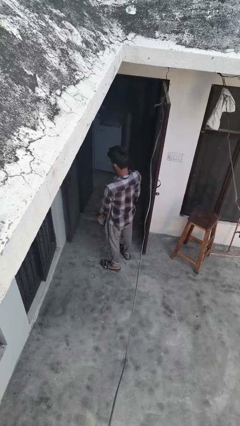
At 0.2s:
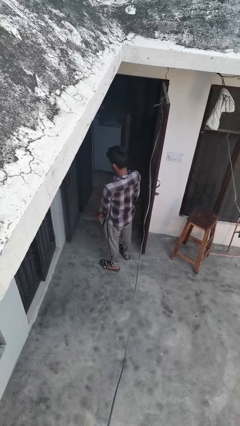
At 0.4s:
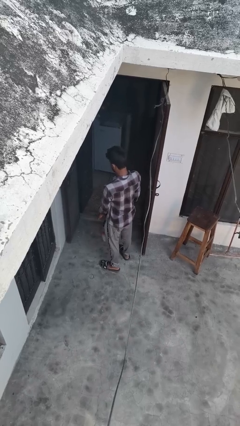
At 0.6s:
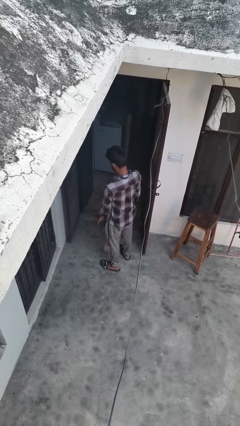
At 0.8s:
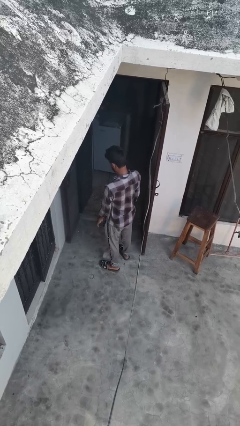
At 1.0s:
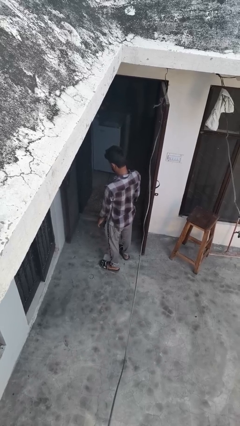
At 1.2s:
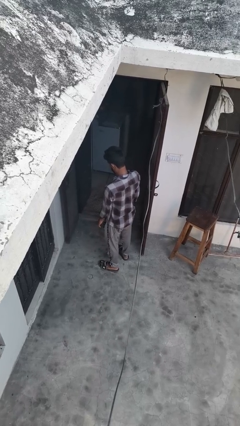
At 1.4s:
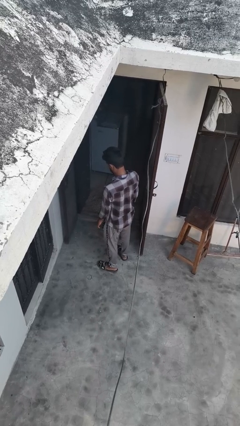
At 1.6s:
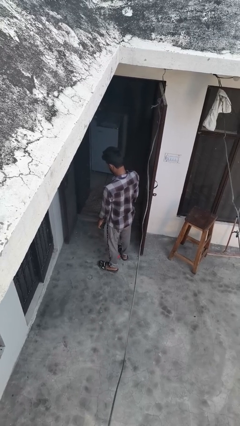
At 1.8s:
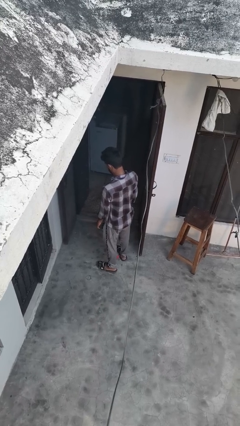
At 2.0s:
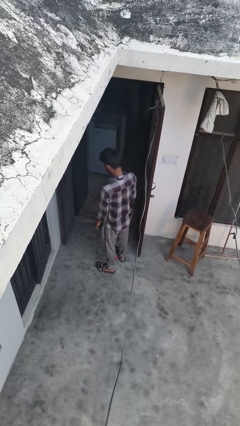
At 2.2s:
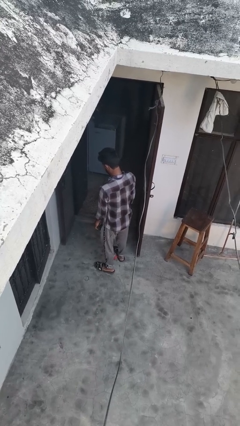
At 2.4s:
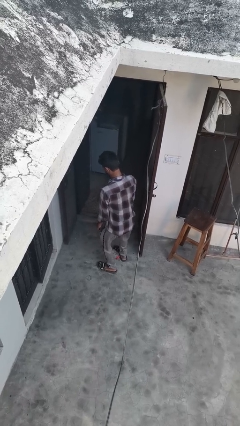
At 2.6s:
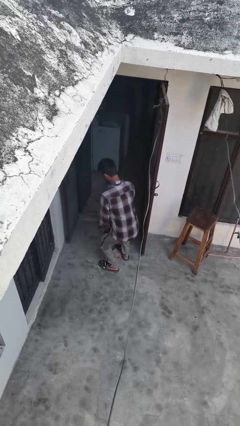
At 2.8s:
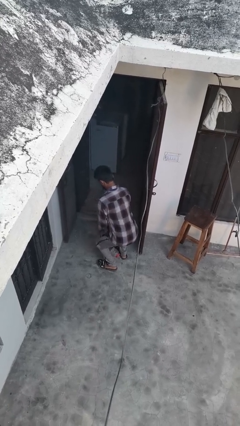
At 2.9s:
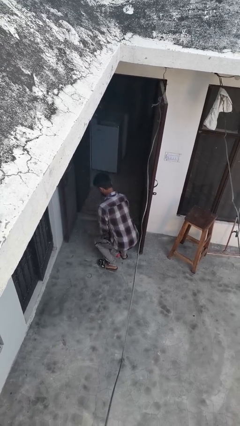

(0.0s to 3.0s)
person drops object

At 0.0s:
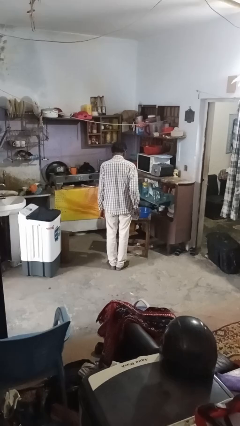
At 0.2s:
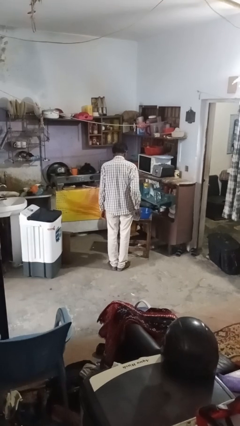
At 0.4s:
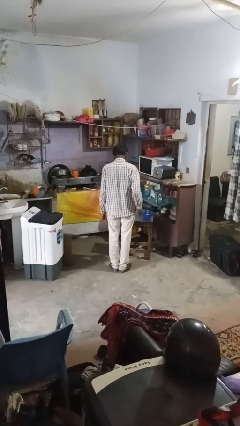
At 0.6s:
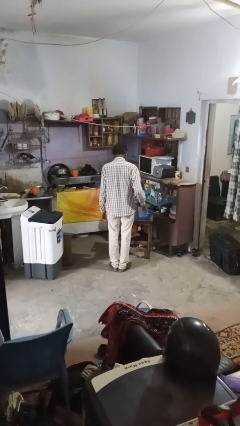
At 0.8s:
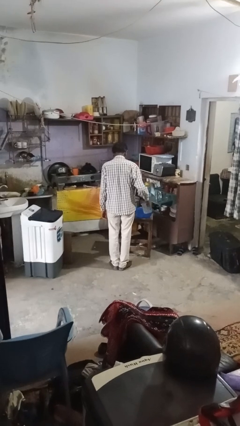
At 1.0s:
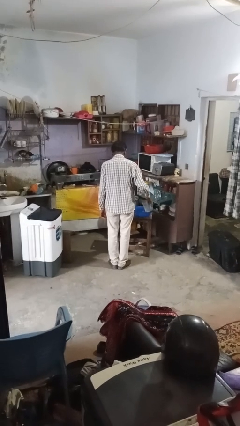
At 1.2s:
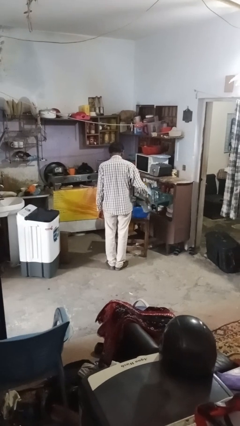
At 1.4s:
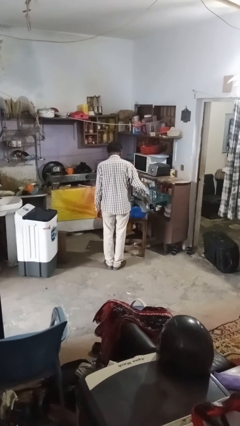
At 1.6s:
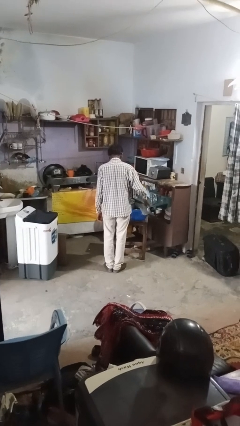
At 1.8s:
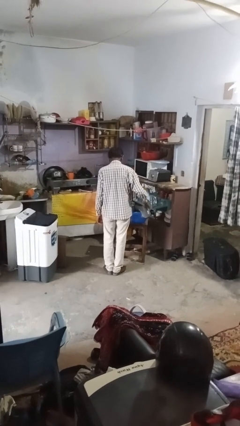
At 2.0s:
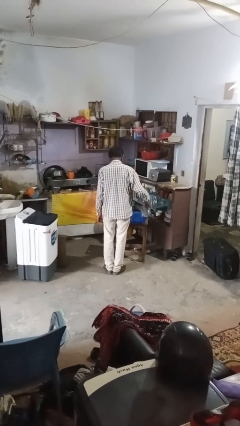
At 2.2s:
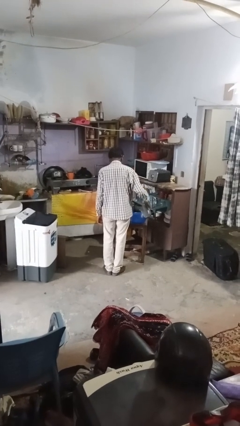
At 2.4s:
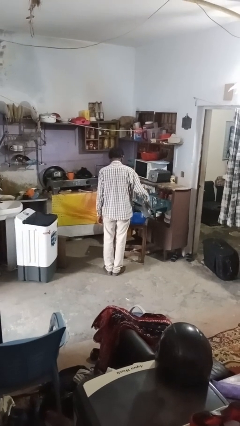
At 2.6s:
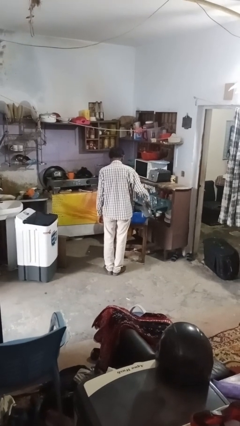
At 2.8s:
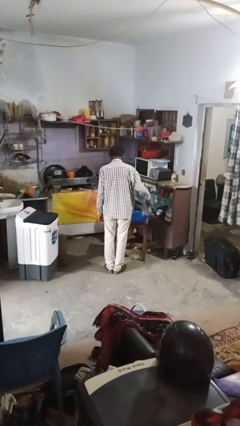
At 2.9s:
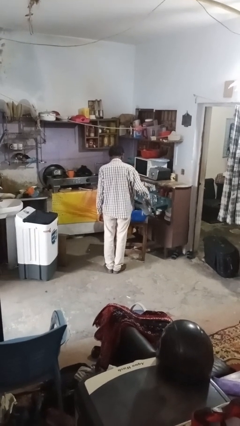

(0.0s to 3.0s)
person pours into bowl

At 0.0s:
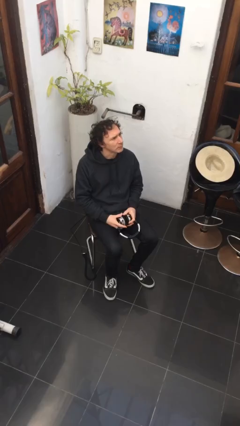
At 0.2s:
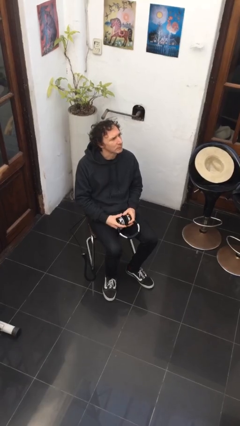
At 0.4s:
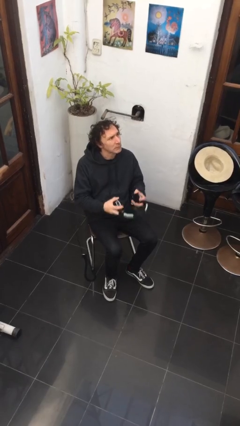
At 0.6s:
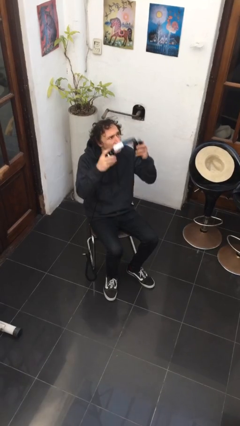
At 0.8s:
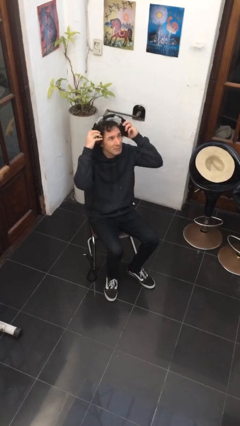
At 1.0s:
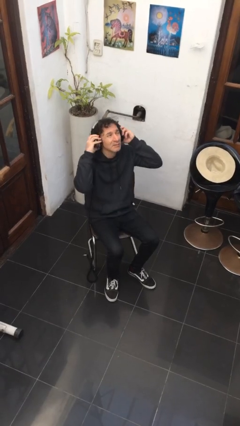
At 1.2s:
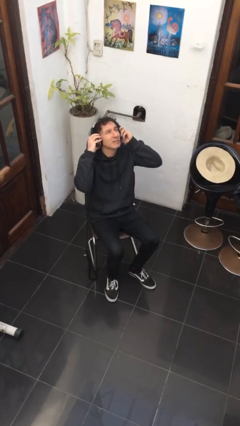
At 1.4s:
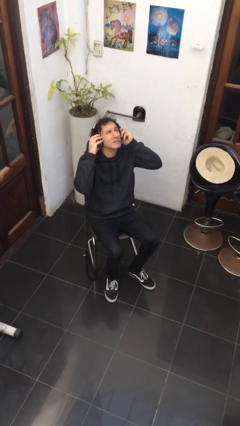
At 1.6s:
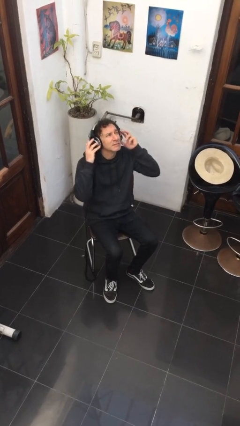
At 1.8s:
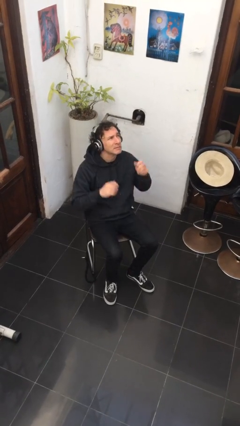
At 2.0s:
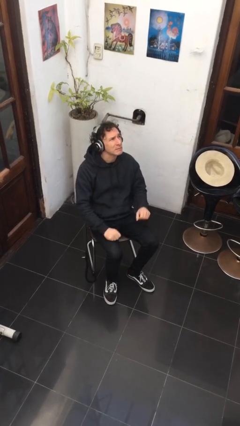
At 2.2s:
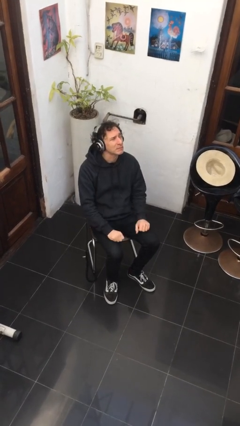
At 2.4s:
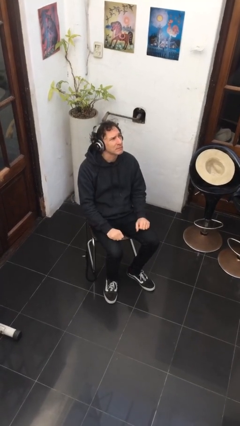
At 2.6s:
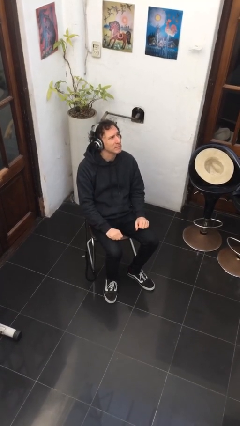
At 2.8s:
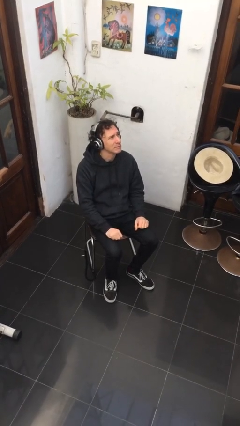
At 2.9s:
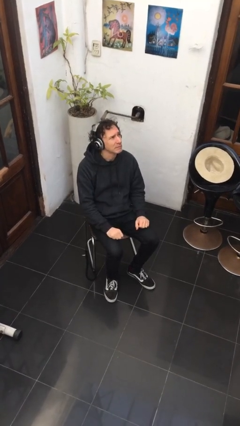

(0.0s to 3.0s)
person puts on headphones

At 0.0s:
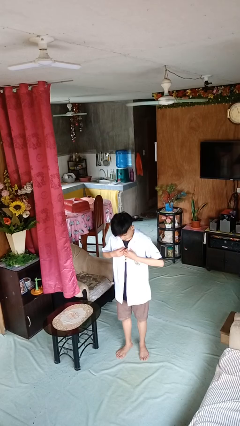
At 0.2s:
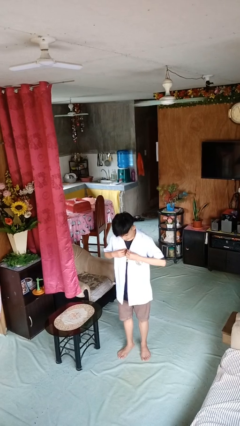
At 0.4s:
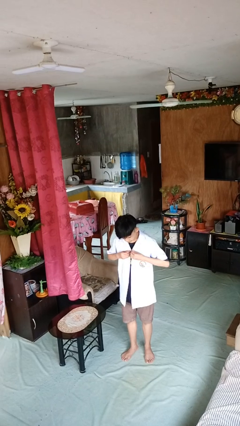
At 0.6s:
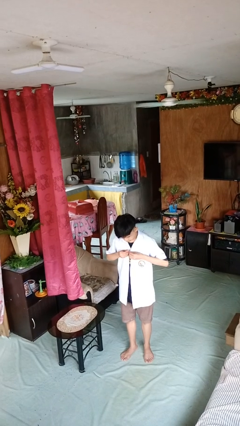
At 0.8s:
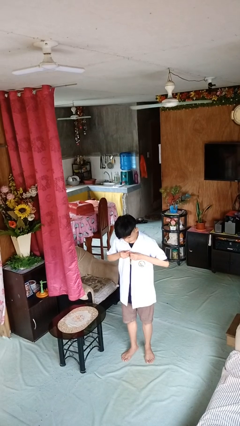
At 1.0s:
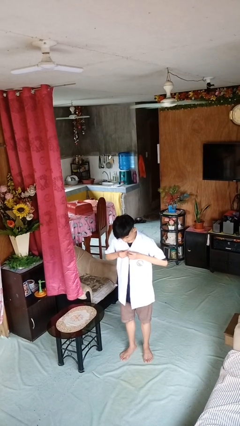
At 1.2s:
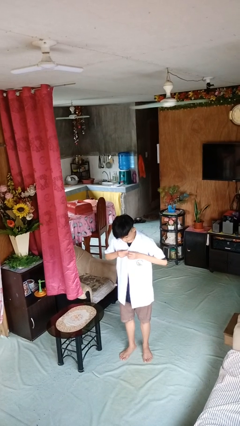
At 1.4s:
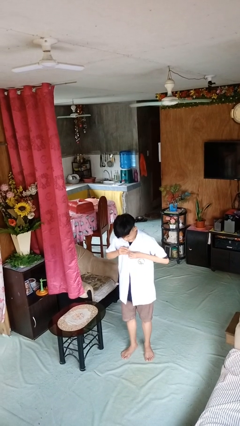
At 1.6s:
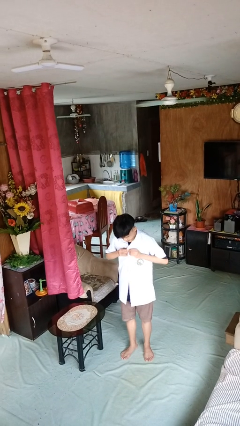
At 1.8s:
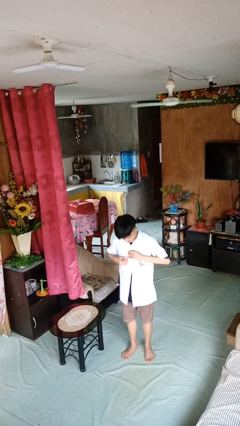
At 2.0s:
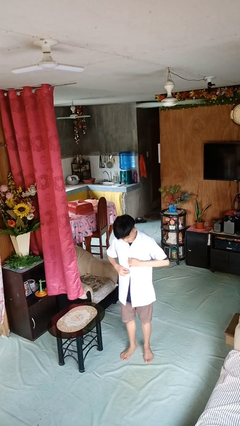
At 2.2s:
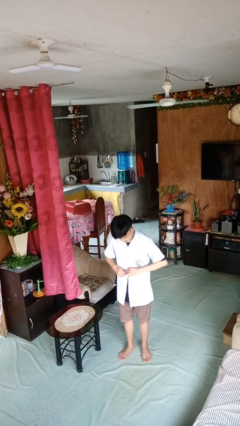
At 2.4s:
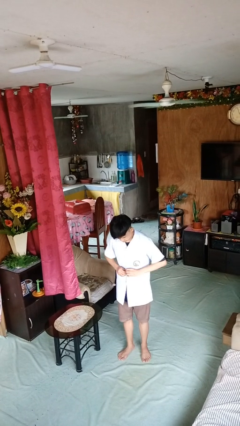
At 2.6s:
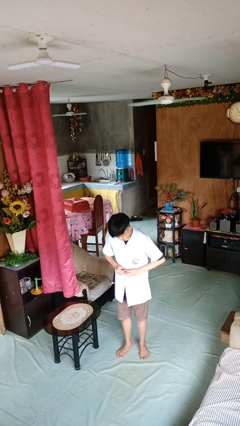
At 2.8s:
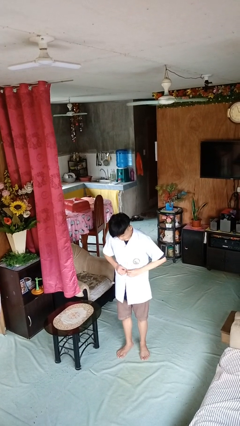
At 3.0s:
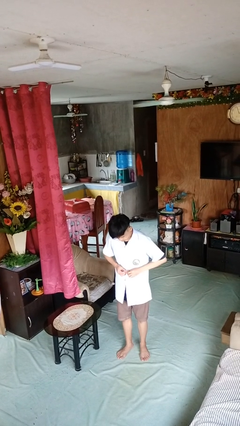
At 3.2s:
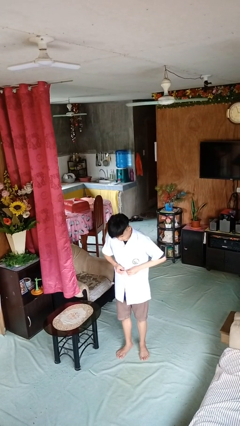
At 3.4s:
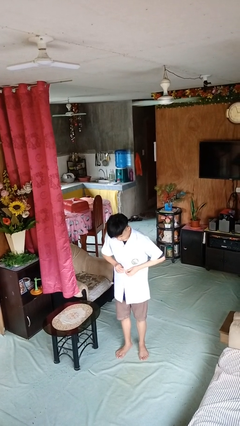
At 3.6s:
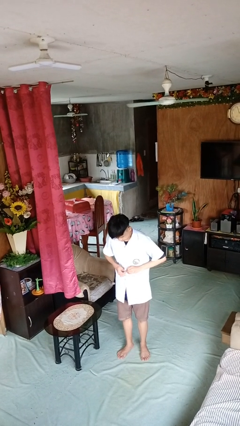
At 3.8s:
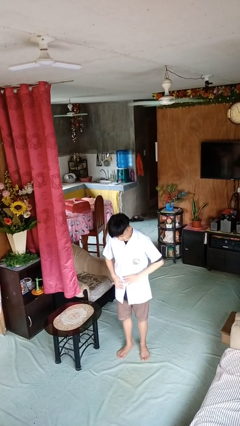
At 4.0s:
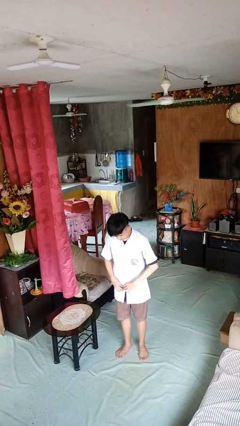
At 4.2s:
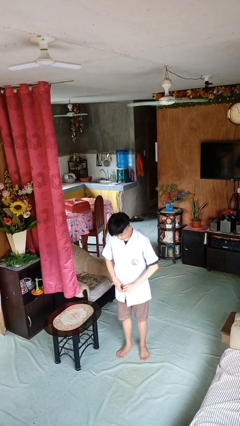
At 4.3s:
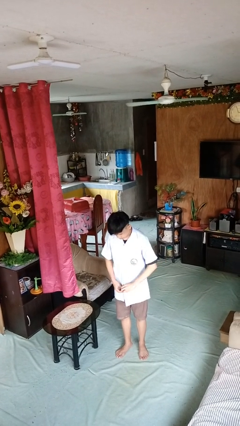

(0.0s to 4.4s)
person buttons shirt

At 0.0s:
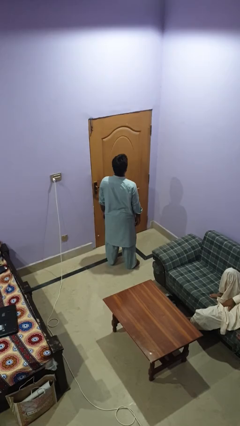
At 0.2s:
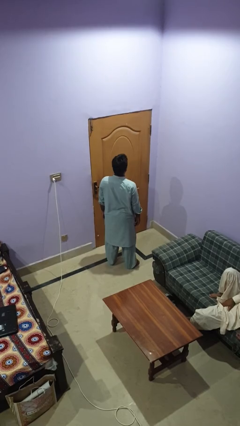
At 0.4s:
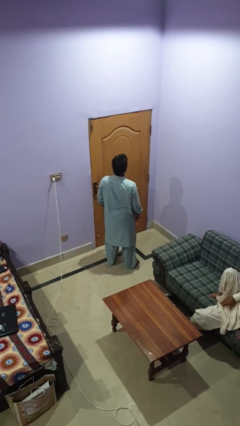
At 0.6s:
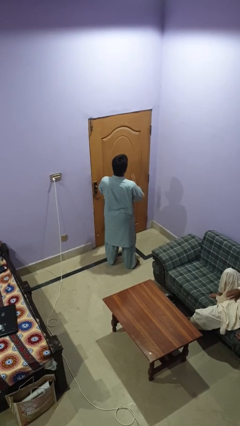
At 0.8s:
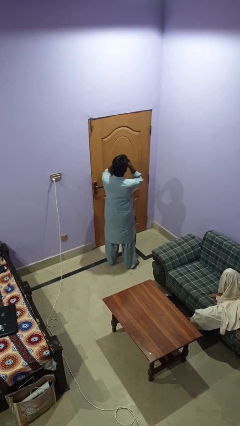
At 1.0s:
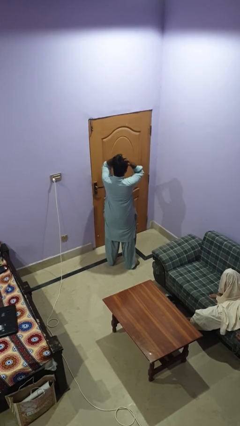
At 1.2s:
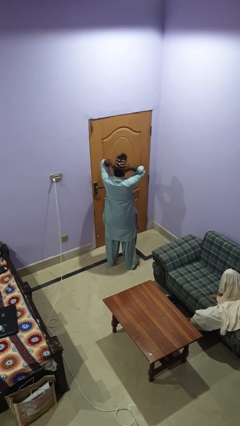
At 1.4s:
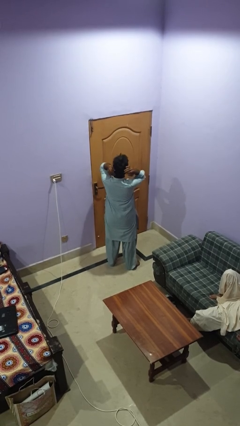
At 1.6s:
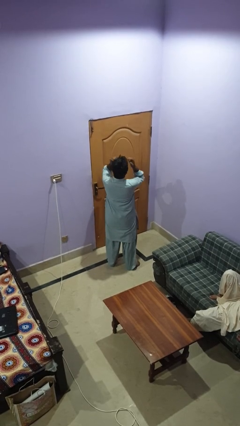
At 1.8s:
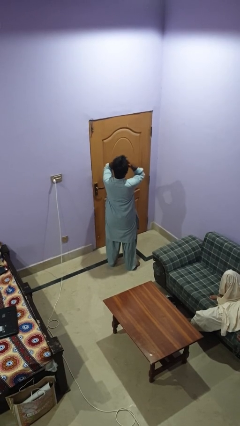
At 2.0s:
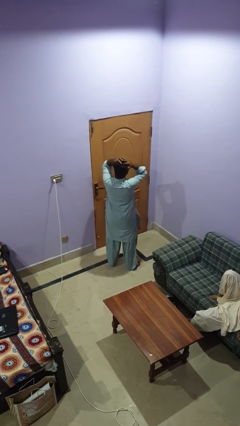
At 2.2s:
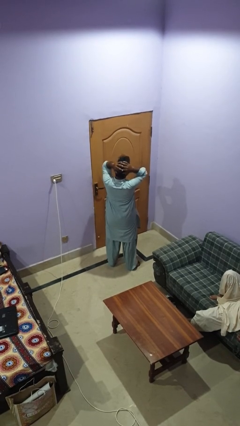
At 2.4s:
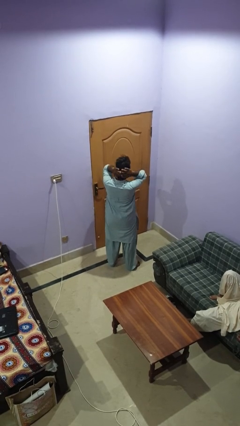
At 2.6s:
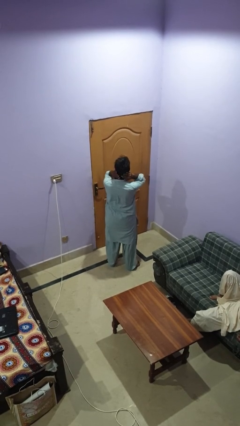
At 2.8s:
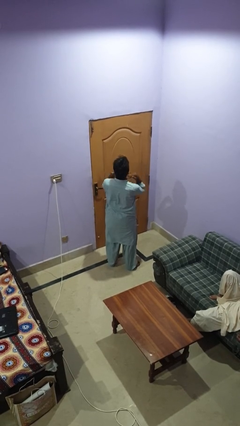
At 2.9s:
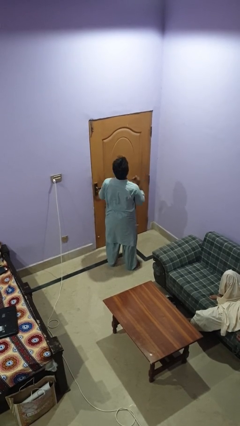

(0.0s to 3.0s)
person strokes hair

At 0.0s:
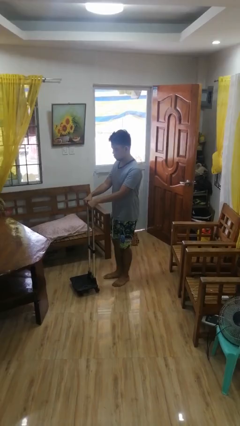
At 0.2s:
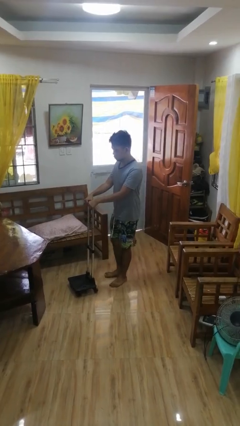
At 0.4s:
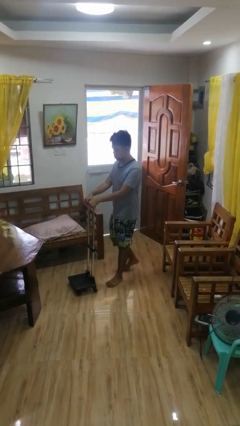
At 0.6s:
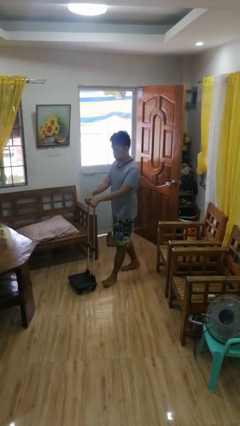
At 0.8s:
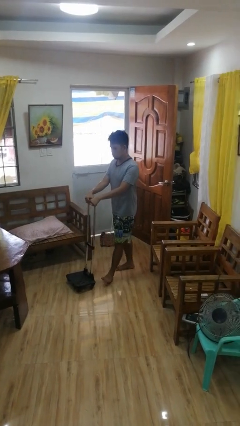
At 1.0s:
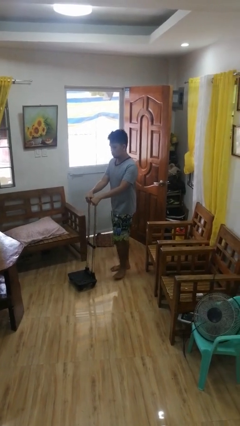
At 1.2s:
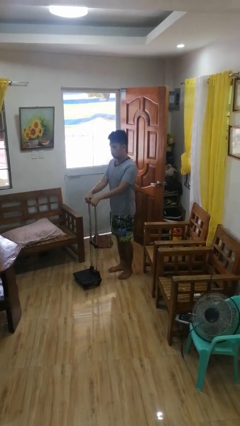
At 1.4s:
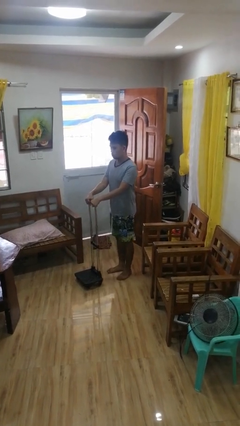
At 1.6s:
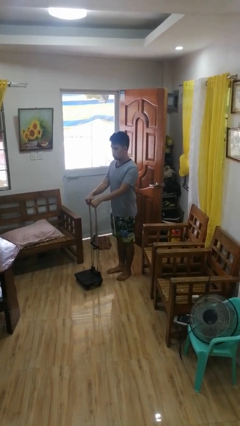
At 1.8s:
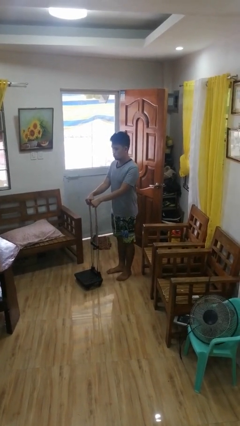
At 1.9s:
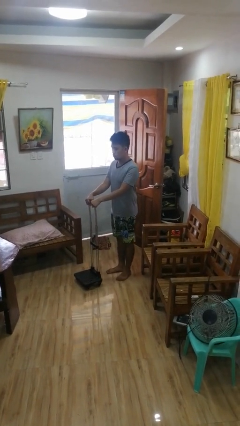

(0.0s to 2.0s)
person pulls wheeled cart
